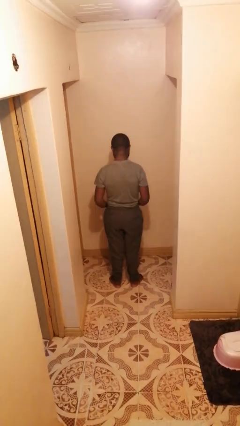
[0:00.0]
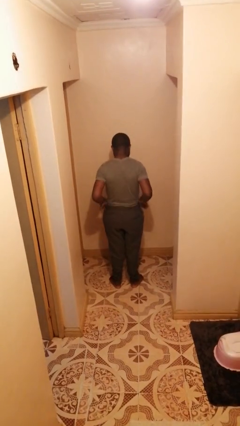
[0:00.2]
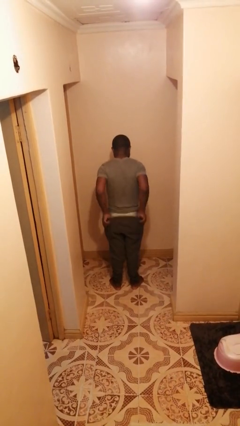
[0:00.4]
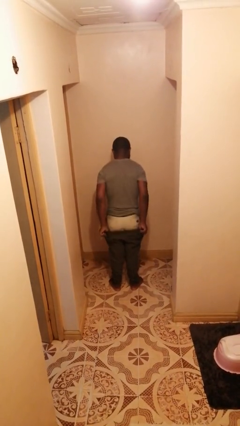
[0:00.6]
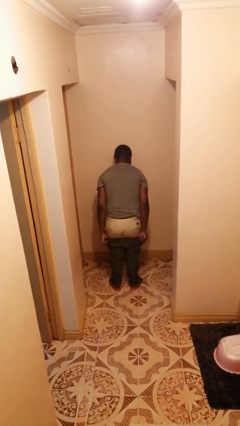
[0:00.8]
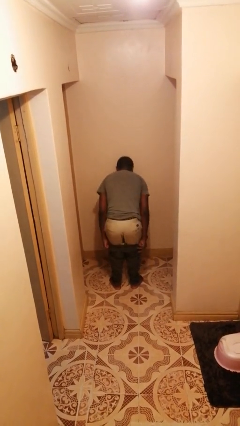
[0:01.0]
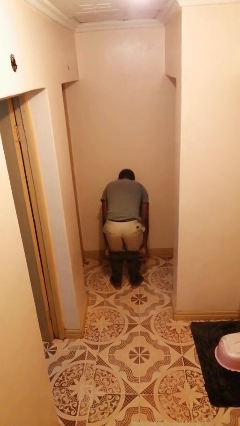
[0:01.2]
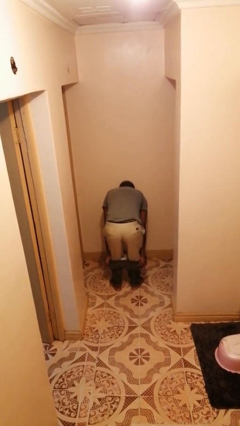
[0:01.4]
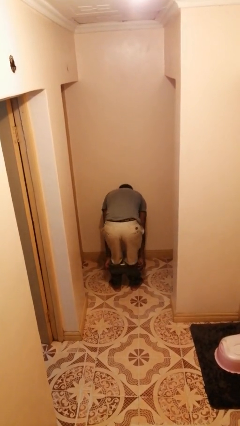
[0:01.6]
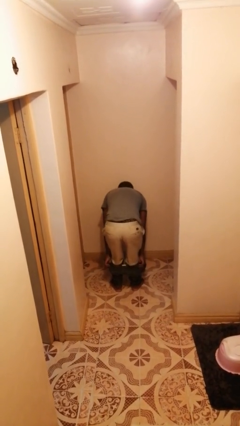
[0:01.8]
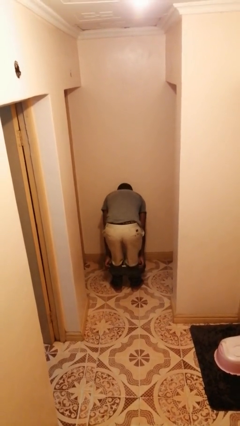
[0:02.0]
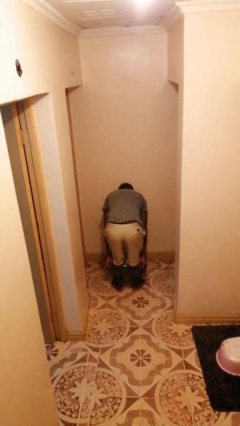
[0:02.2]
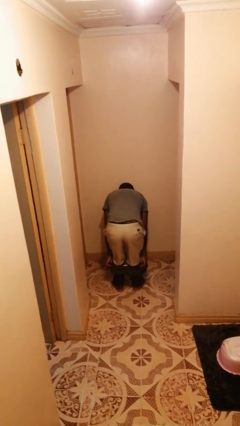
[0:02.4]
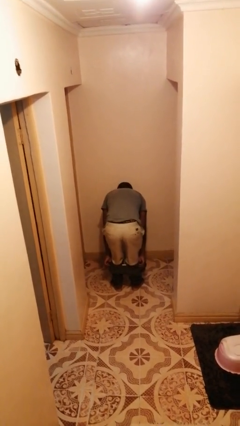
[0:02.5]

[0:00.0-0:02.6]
person takes off pants

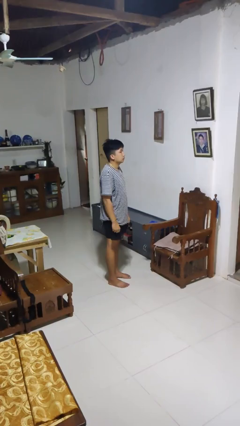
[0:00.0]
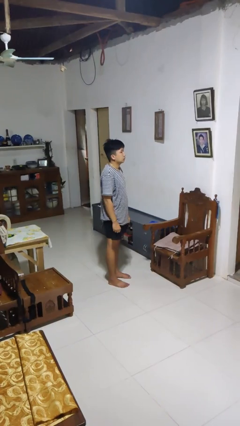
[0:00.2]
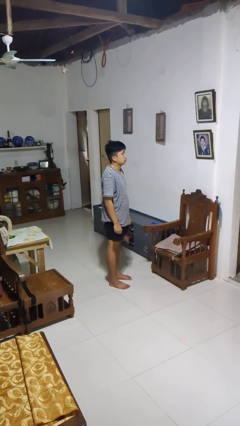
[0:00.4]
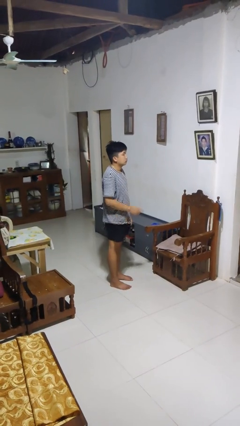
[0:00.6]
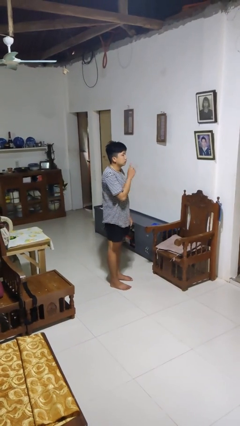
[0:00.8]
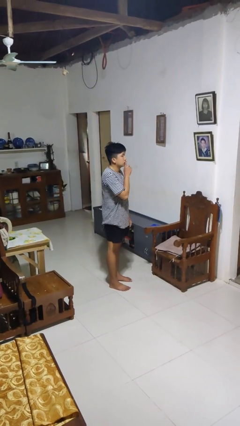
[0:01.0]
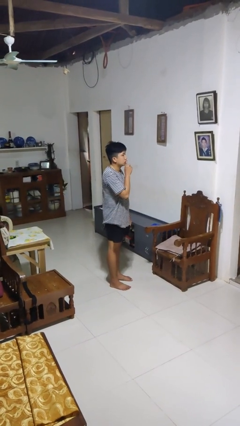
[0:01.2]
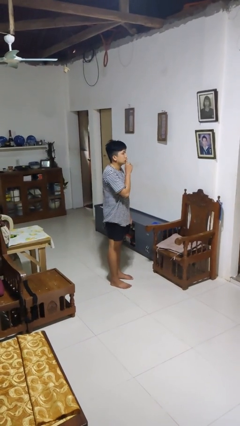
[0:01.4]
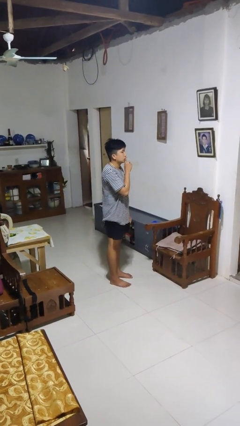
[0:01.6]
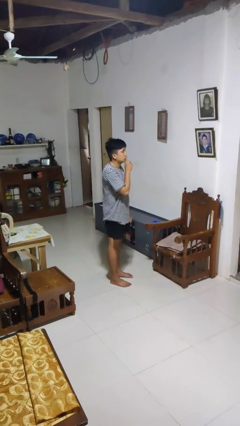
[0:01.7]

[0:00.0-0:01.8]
person gestures be quiet

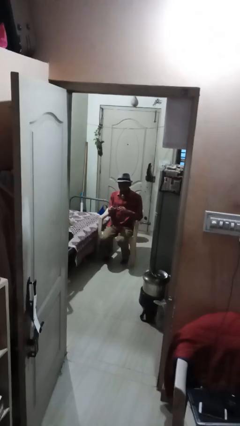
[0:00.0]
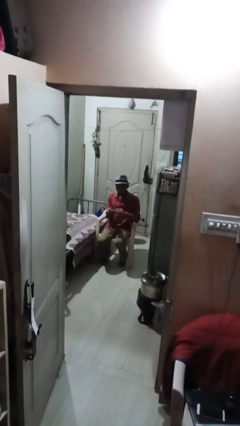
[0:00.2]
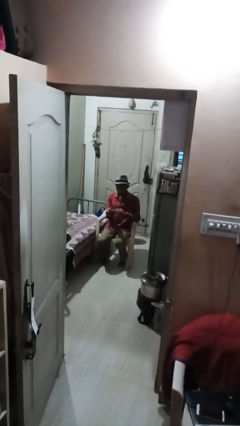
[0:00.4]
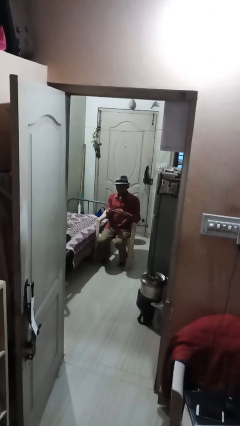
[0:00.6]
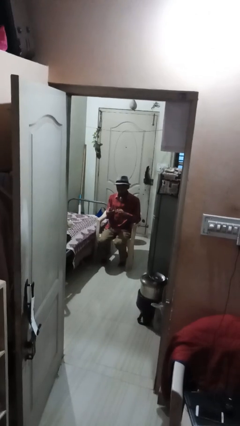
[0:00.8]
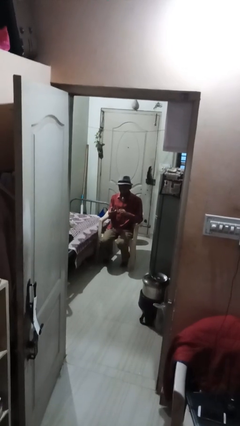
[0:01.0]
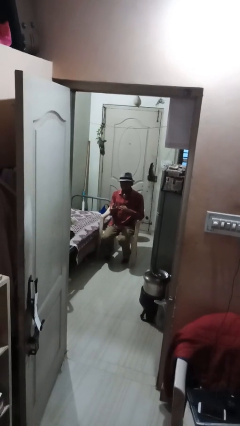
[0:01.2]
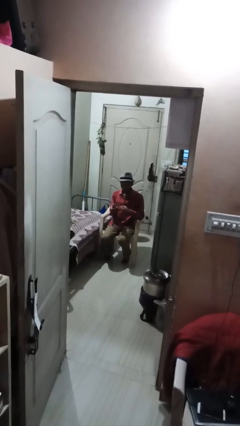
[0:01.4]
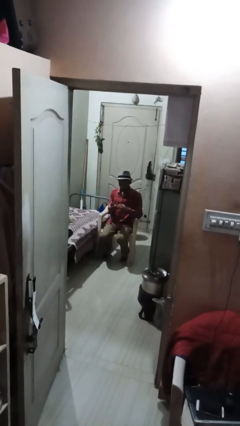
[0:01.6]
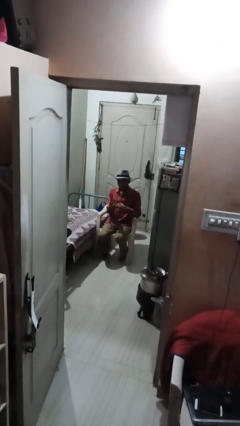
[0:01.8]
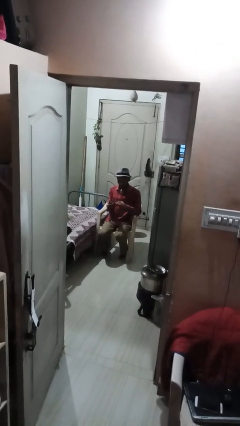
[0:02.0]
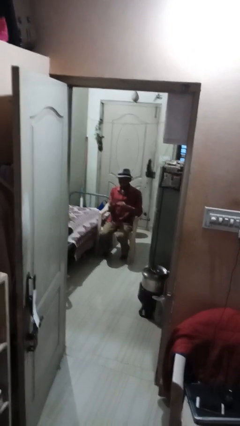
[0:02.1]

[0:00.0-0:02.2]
person clips fingernails

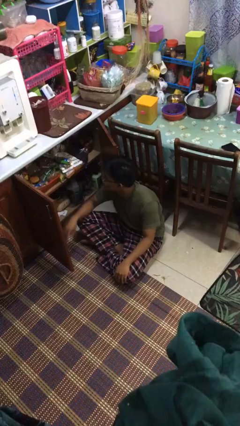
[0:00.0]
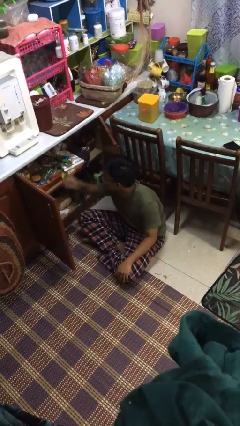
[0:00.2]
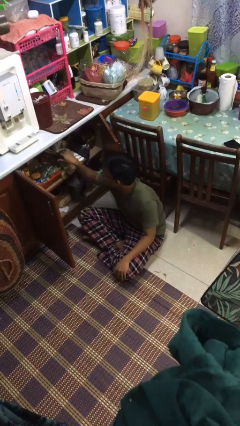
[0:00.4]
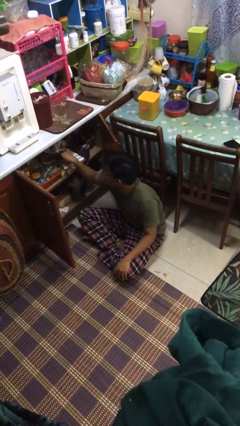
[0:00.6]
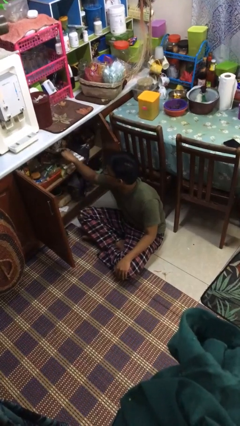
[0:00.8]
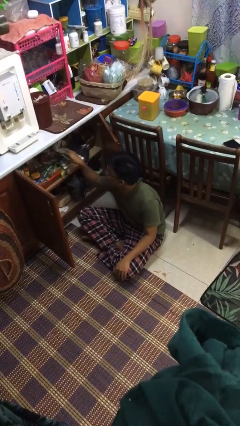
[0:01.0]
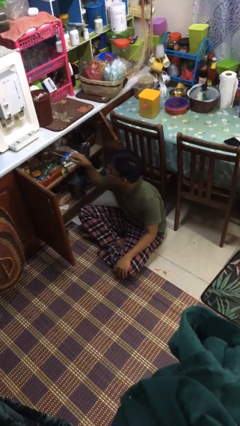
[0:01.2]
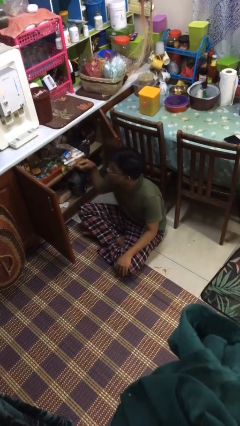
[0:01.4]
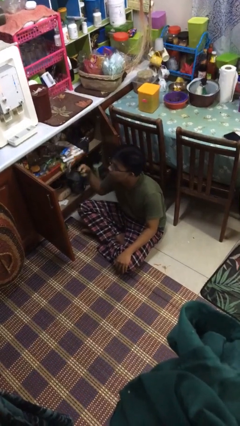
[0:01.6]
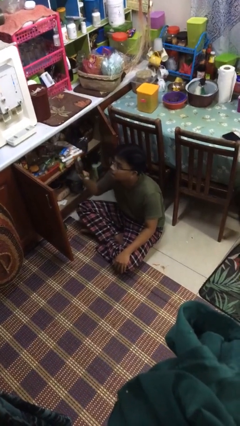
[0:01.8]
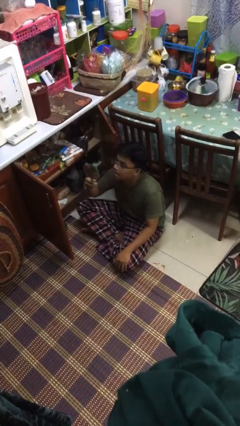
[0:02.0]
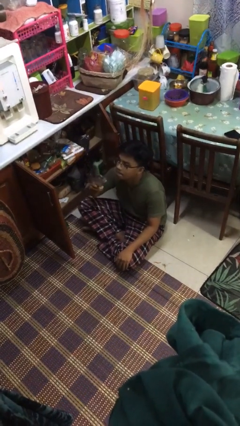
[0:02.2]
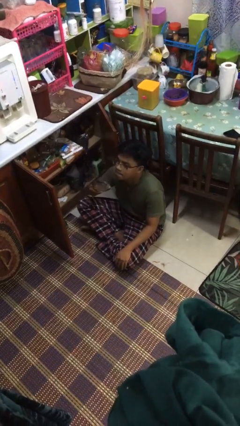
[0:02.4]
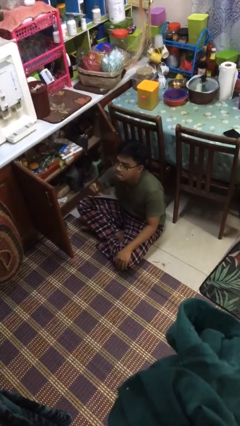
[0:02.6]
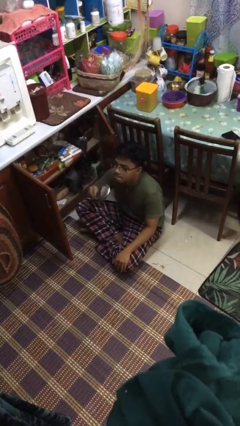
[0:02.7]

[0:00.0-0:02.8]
person takes object from kitchen drawer

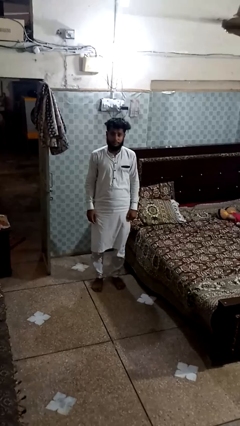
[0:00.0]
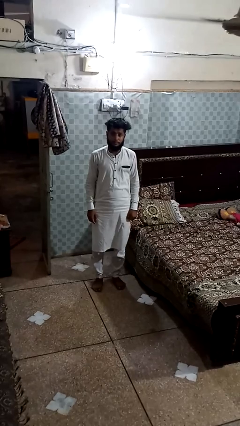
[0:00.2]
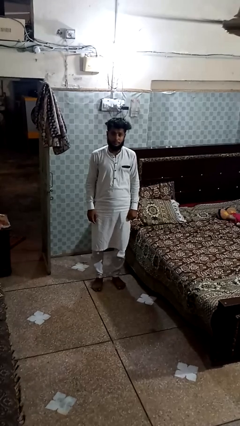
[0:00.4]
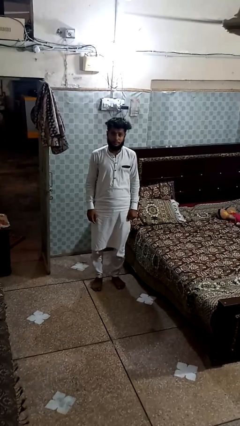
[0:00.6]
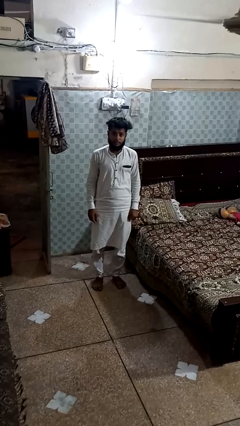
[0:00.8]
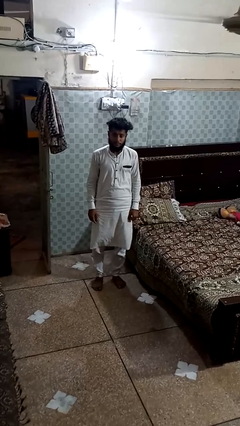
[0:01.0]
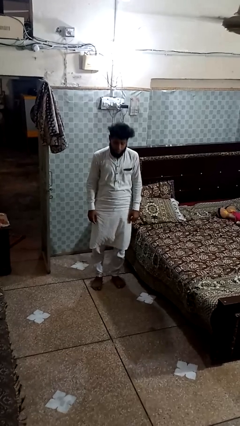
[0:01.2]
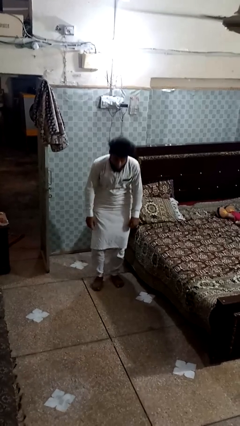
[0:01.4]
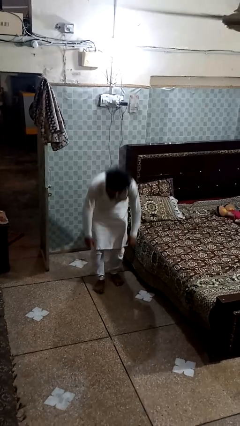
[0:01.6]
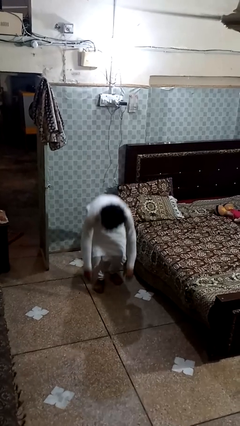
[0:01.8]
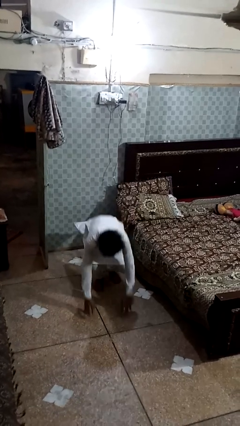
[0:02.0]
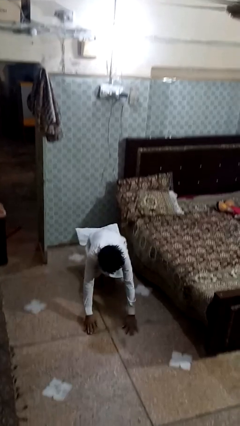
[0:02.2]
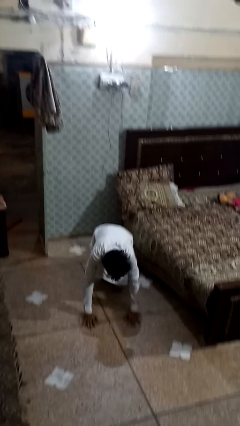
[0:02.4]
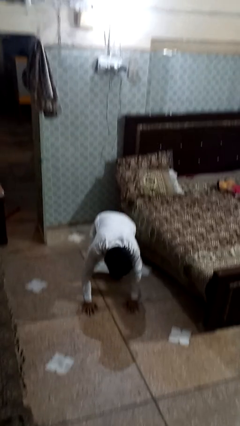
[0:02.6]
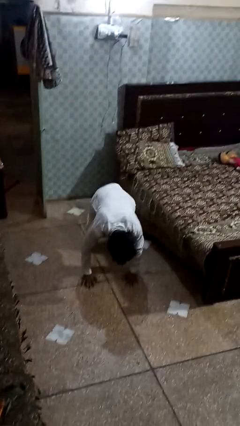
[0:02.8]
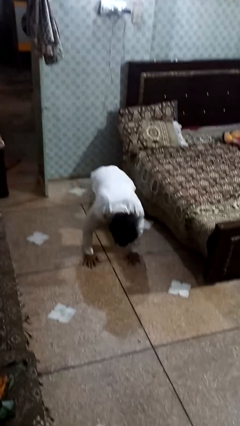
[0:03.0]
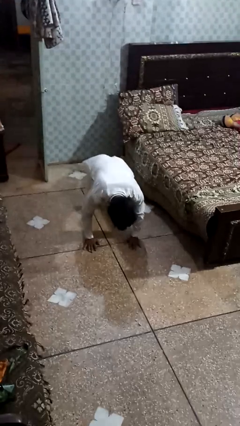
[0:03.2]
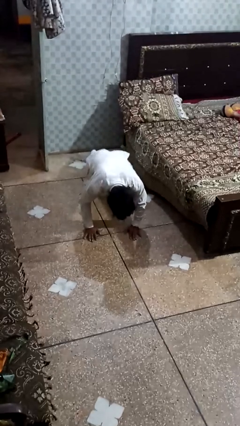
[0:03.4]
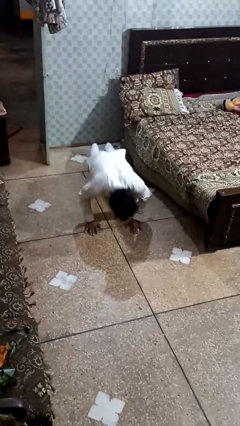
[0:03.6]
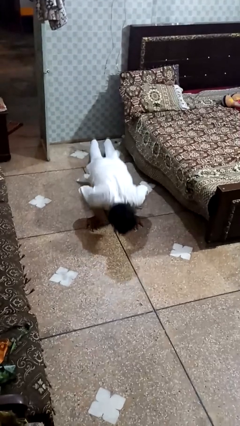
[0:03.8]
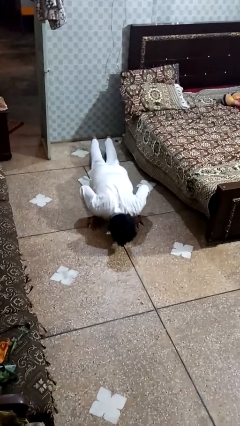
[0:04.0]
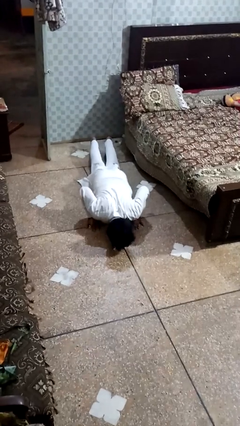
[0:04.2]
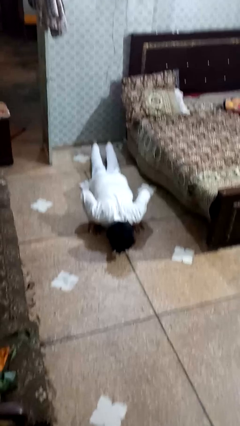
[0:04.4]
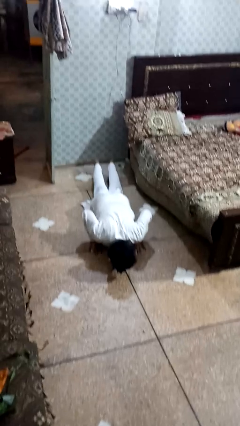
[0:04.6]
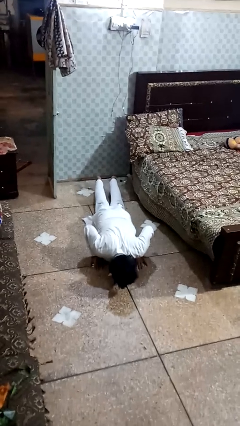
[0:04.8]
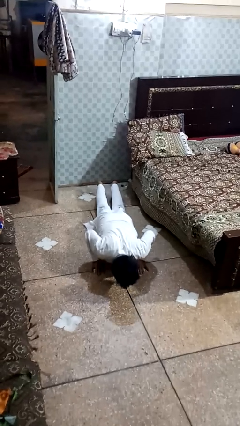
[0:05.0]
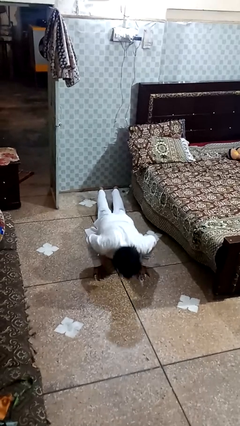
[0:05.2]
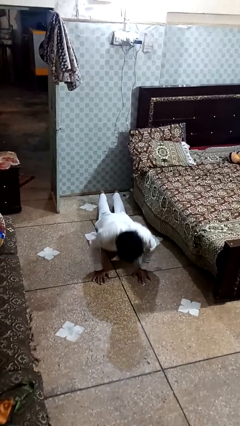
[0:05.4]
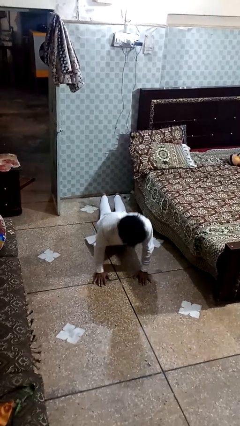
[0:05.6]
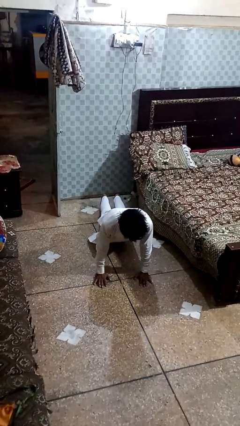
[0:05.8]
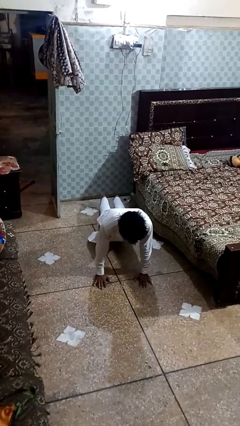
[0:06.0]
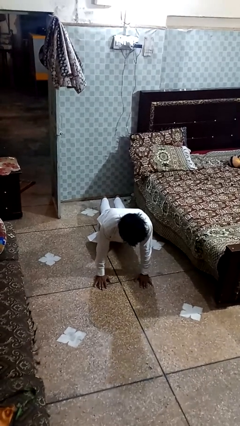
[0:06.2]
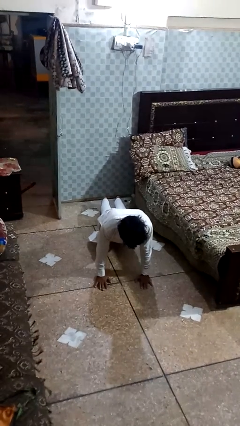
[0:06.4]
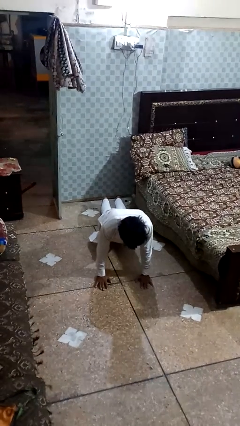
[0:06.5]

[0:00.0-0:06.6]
person stands up from floor

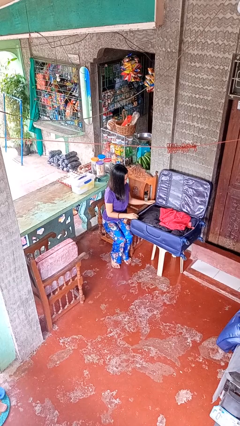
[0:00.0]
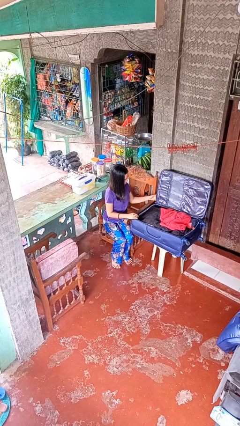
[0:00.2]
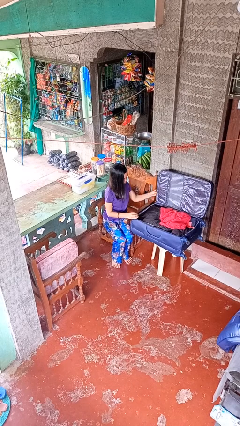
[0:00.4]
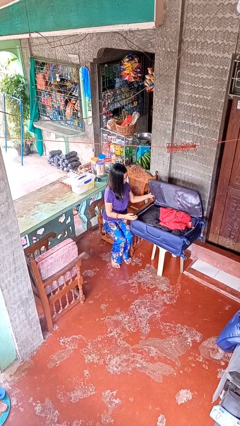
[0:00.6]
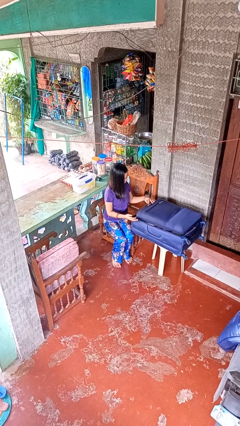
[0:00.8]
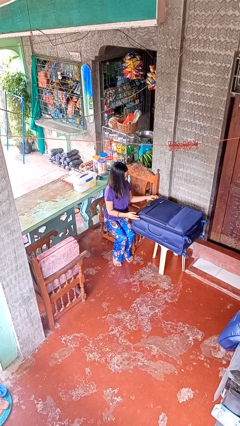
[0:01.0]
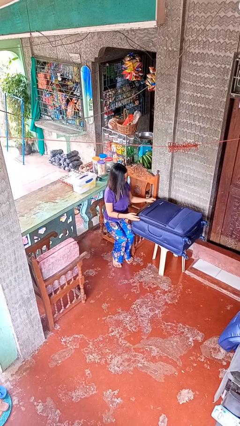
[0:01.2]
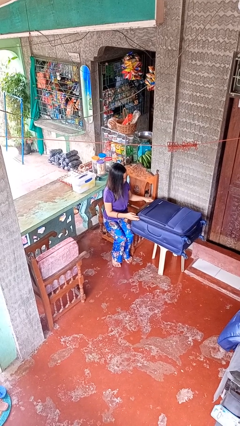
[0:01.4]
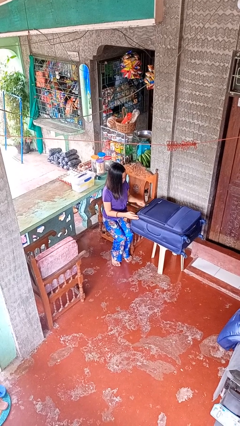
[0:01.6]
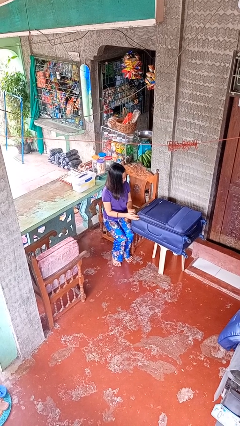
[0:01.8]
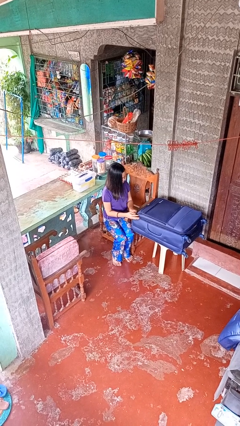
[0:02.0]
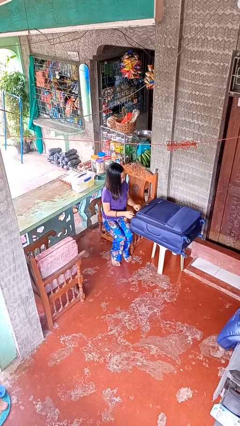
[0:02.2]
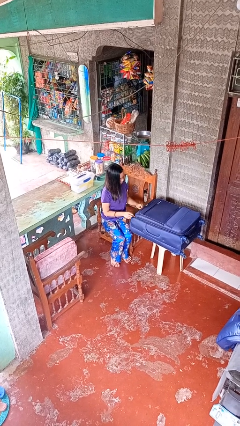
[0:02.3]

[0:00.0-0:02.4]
person closes suitcase
